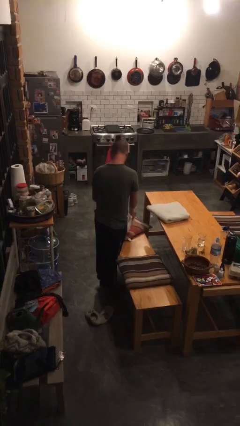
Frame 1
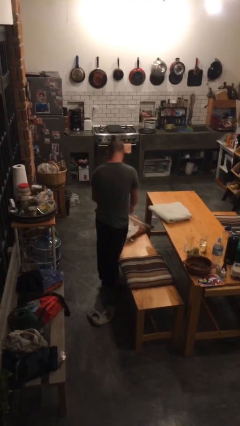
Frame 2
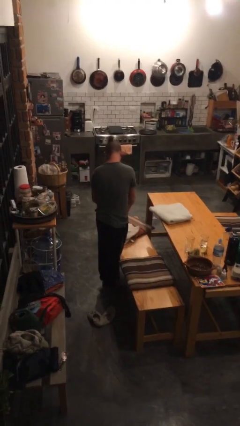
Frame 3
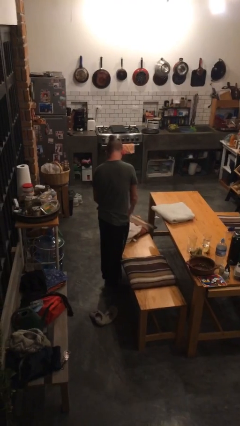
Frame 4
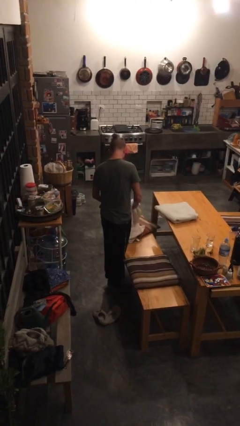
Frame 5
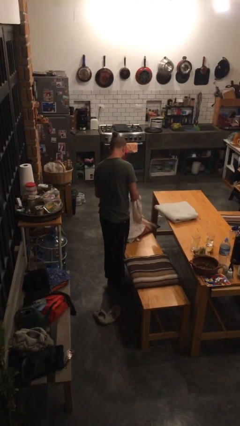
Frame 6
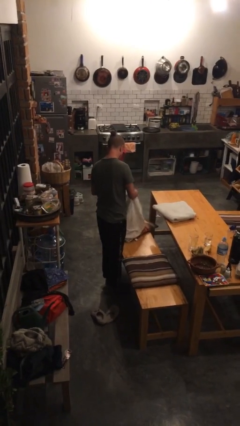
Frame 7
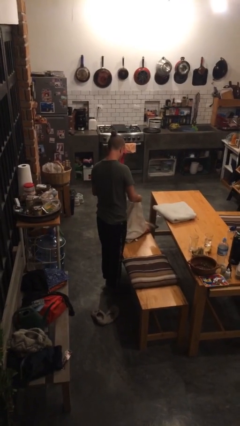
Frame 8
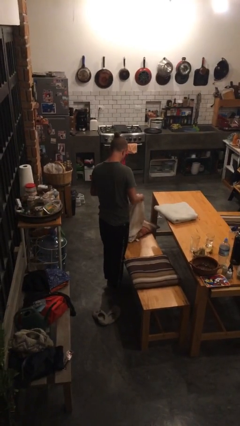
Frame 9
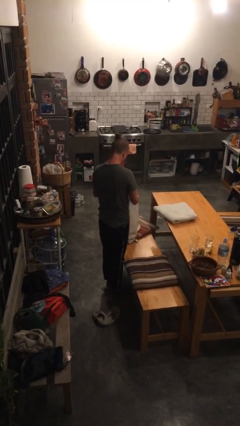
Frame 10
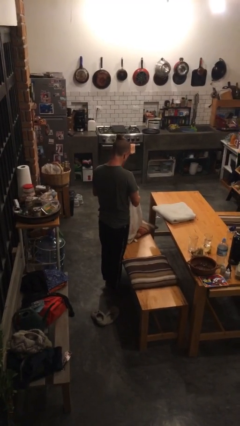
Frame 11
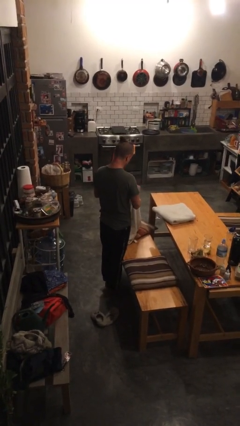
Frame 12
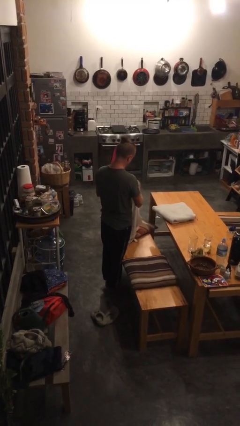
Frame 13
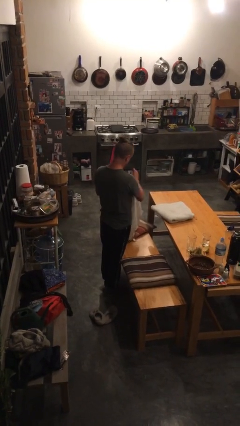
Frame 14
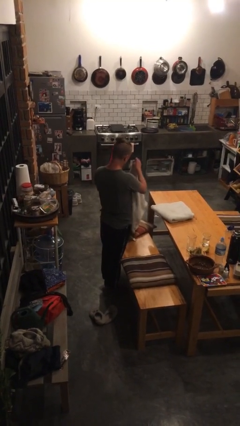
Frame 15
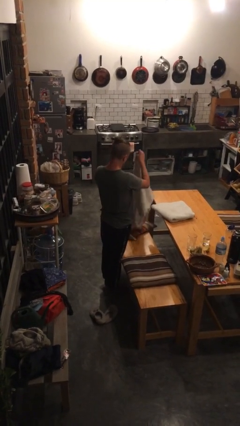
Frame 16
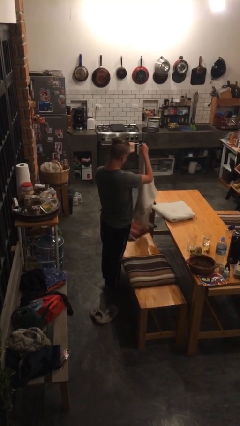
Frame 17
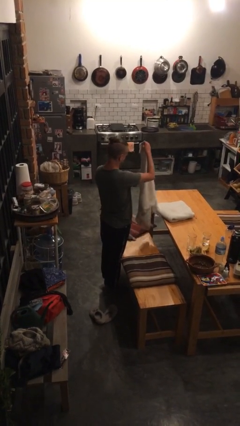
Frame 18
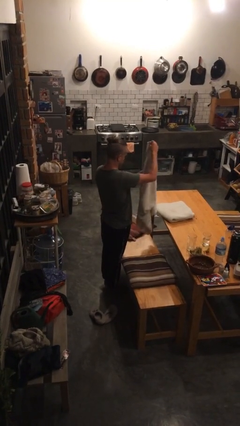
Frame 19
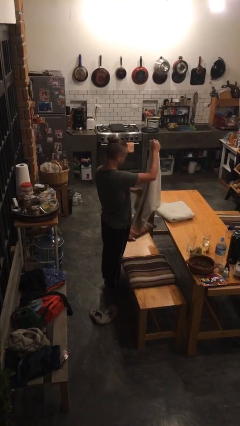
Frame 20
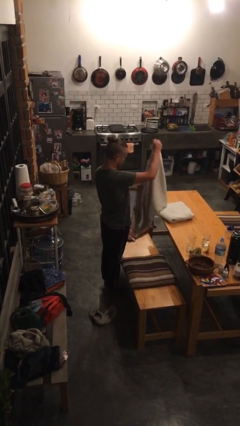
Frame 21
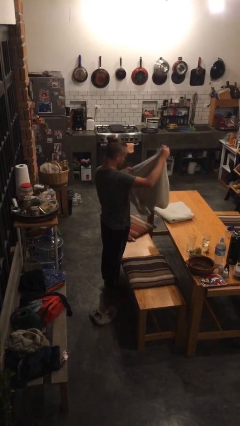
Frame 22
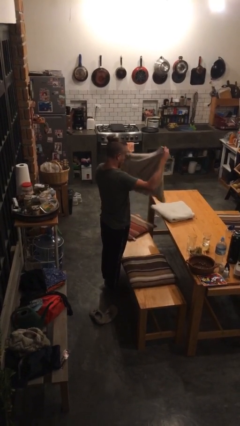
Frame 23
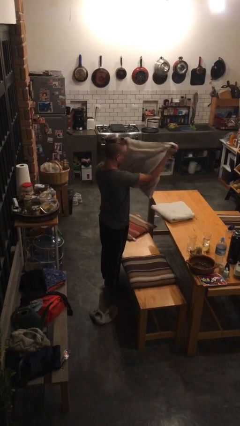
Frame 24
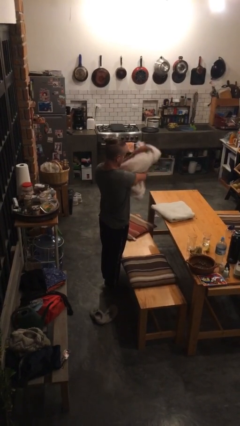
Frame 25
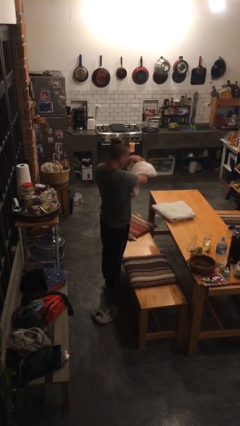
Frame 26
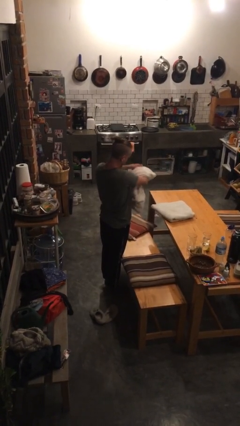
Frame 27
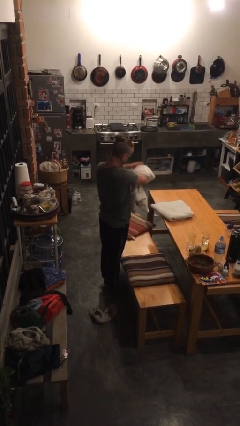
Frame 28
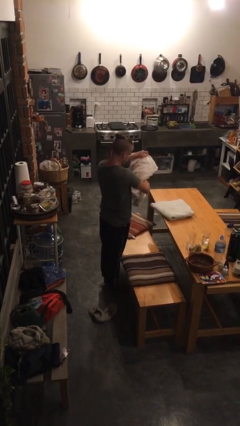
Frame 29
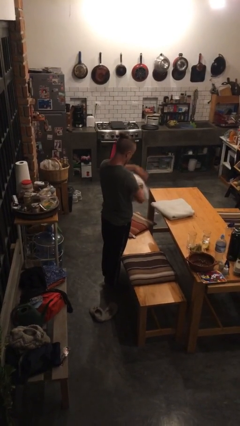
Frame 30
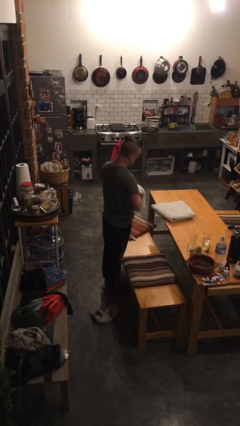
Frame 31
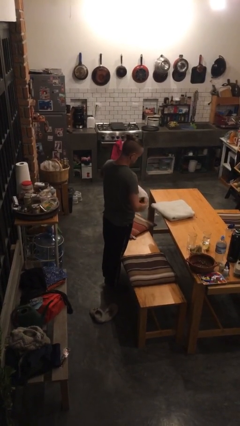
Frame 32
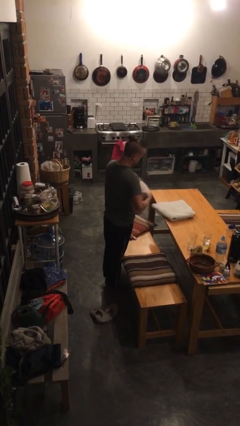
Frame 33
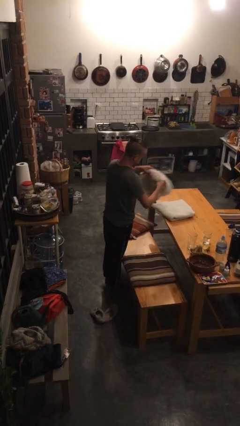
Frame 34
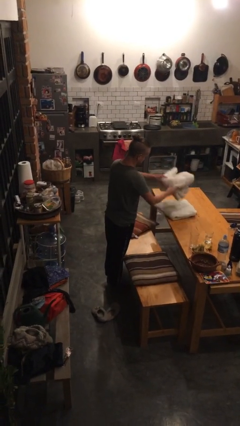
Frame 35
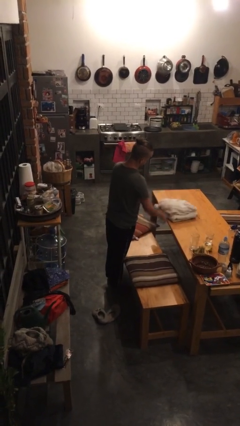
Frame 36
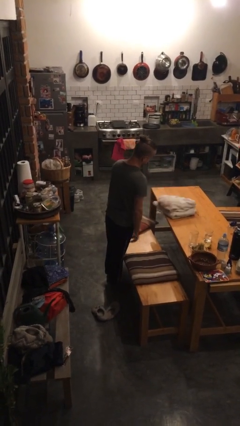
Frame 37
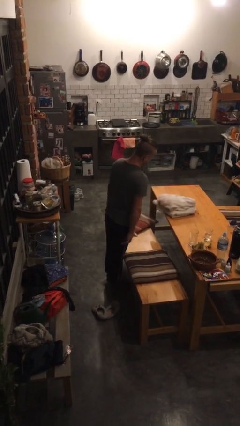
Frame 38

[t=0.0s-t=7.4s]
person folds towel

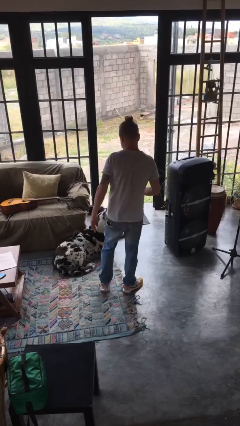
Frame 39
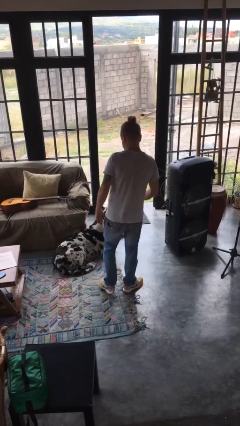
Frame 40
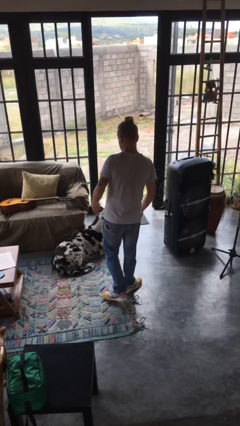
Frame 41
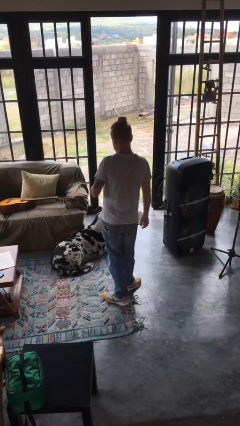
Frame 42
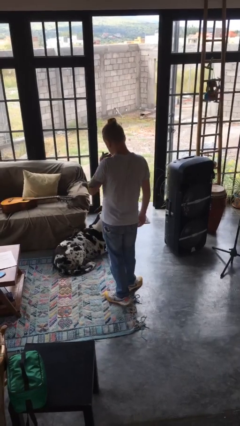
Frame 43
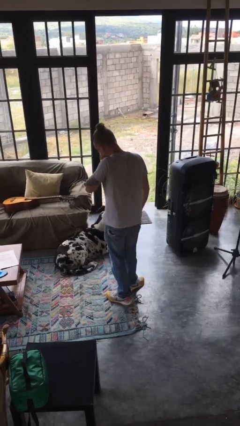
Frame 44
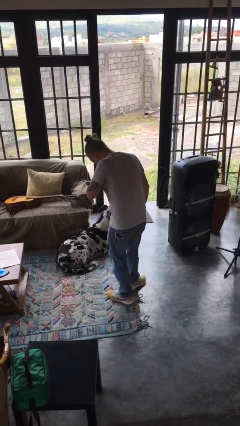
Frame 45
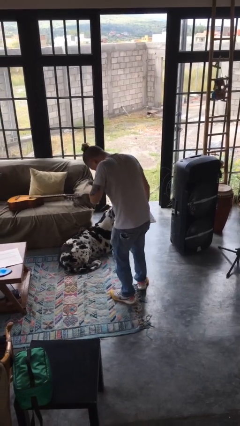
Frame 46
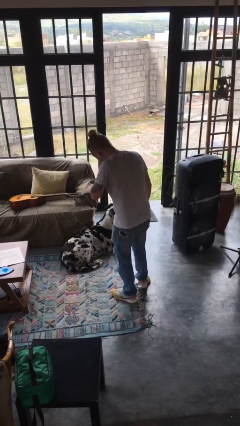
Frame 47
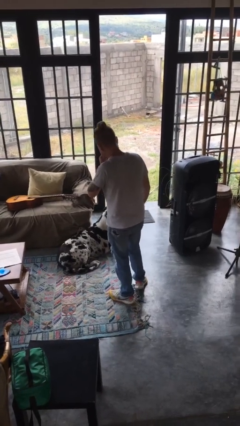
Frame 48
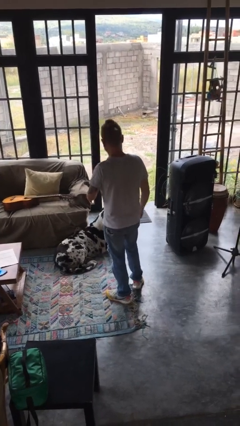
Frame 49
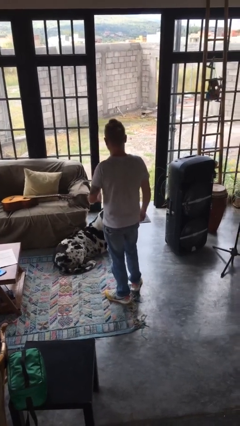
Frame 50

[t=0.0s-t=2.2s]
person sneezes into hand

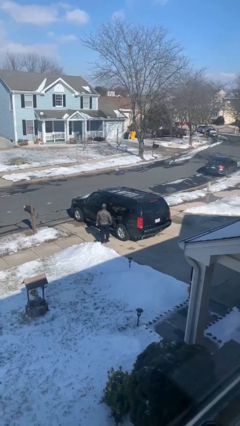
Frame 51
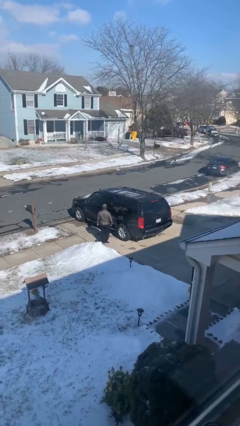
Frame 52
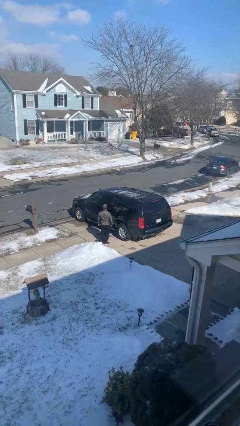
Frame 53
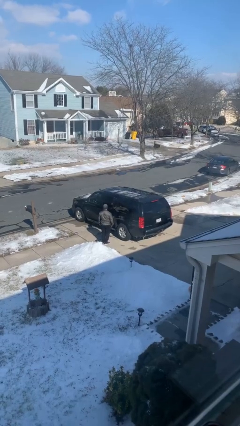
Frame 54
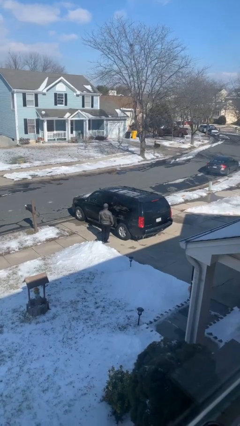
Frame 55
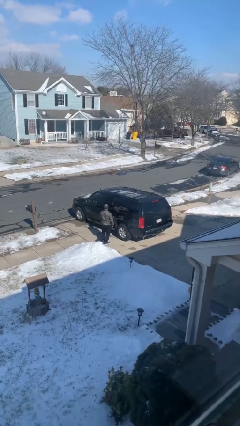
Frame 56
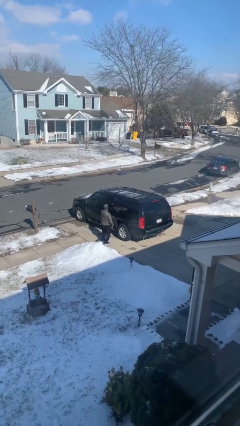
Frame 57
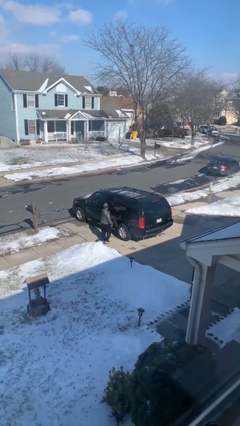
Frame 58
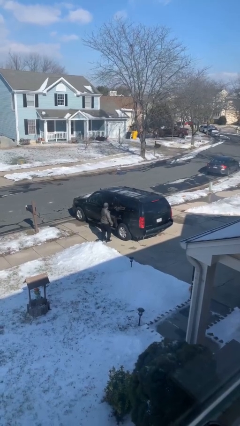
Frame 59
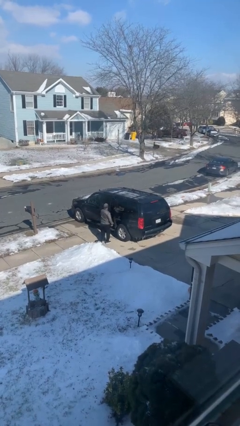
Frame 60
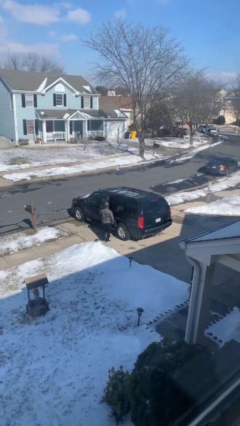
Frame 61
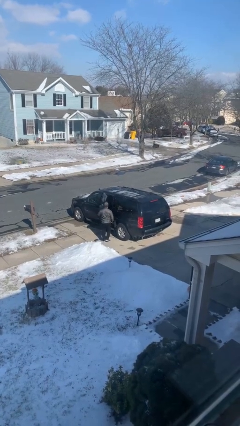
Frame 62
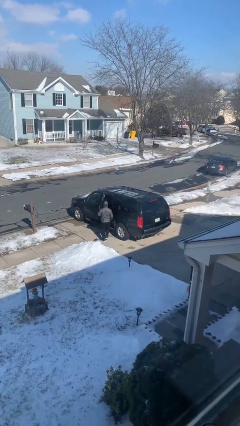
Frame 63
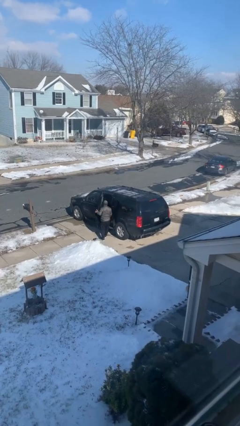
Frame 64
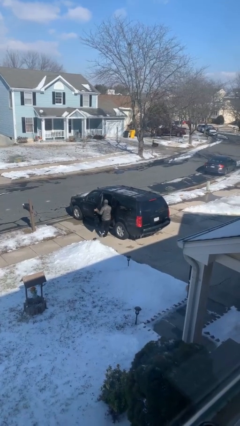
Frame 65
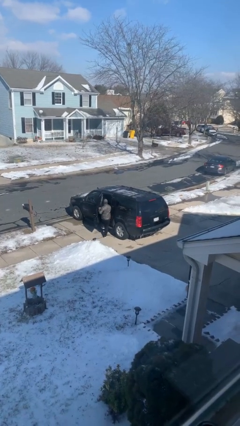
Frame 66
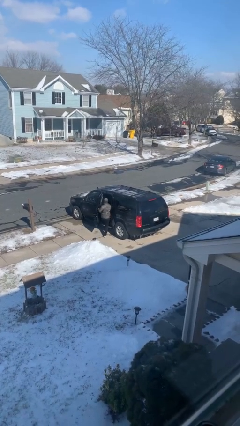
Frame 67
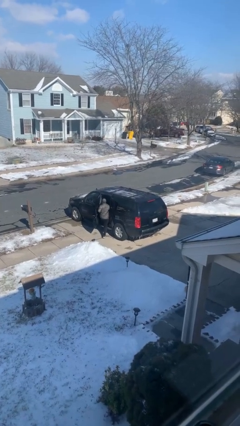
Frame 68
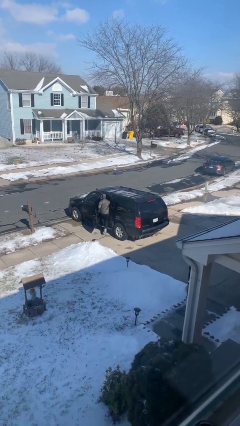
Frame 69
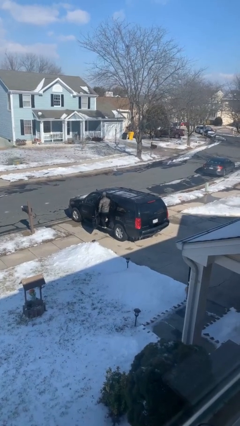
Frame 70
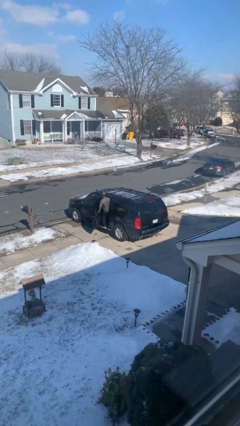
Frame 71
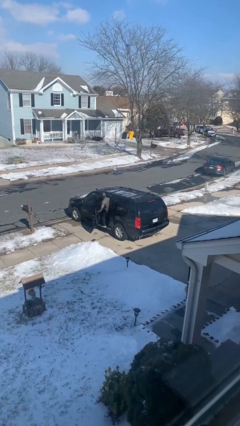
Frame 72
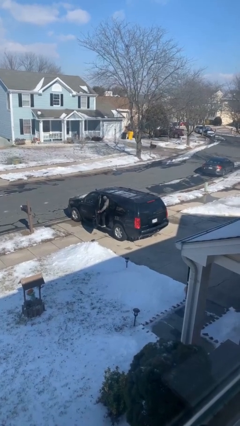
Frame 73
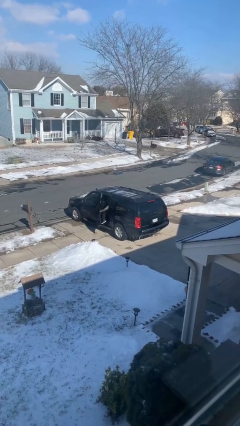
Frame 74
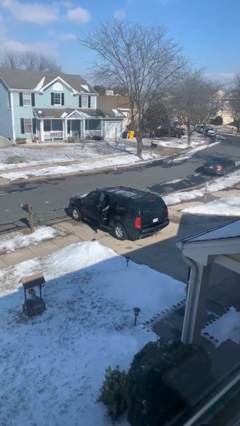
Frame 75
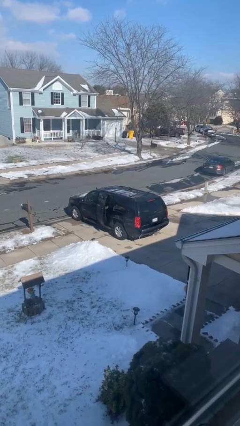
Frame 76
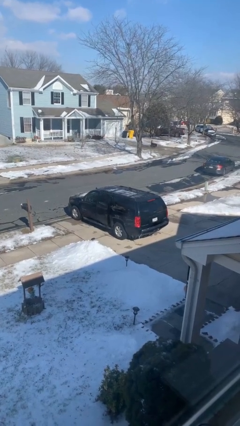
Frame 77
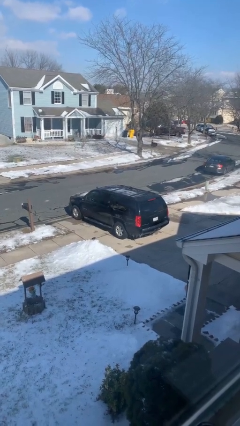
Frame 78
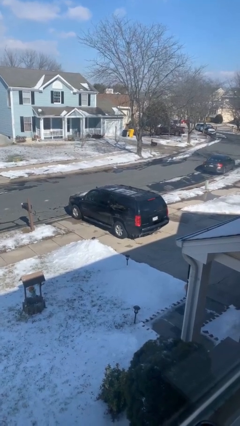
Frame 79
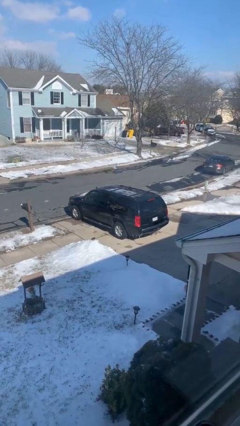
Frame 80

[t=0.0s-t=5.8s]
car picks up person

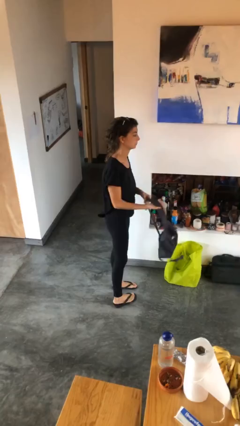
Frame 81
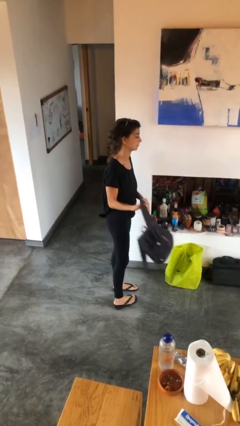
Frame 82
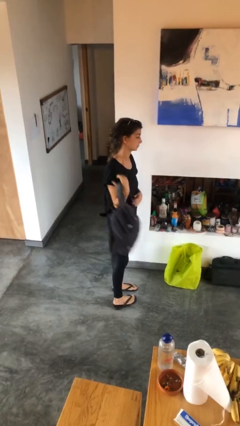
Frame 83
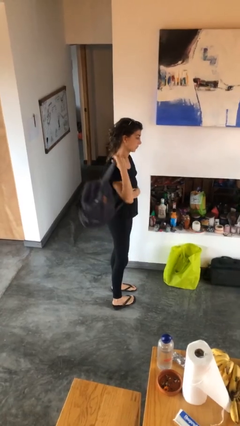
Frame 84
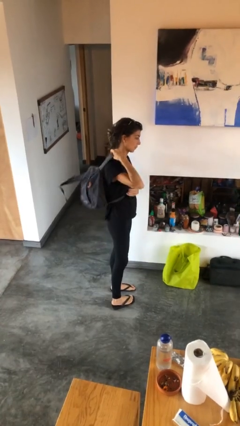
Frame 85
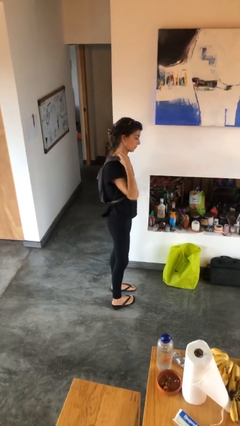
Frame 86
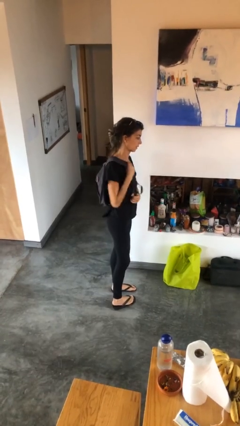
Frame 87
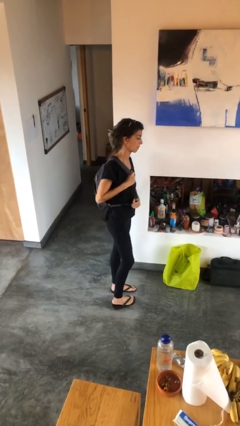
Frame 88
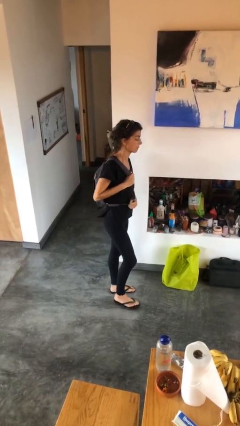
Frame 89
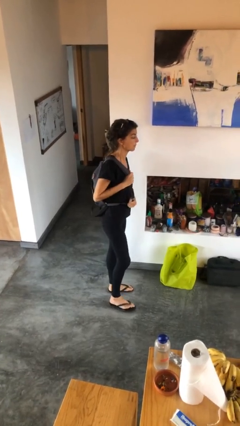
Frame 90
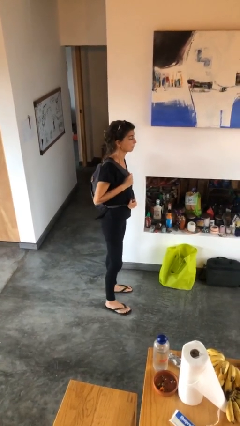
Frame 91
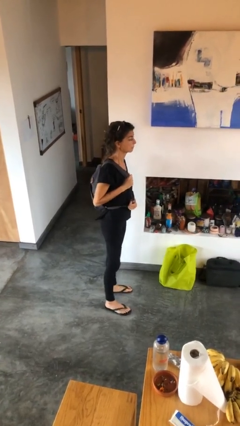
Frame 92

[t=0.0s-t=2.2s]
person puts on backpack
